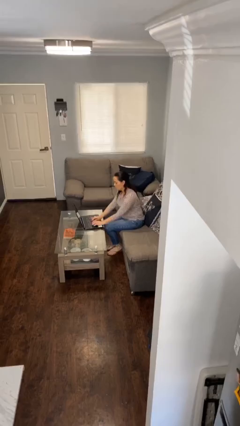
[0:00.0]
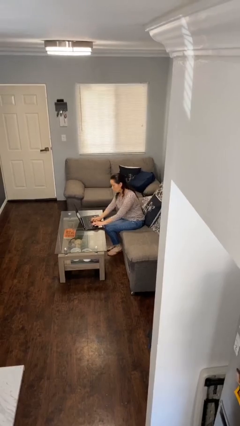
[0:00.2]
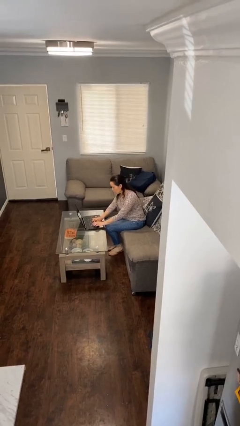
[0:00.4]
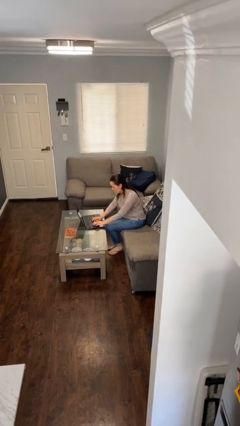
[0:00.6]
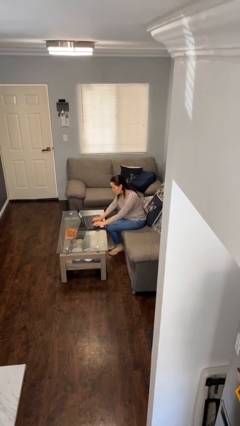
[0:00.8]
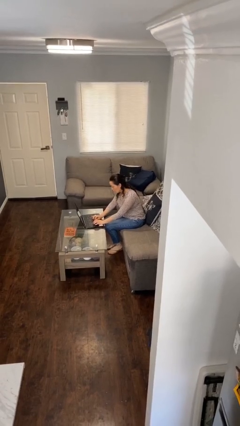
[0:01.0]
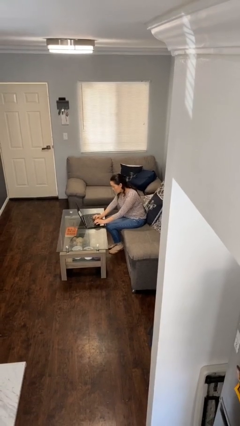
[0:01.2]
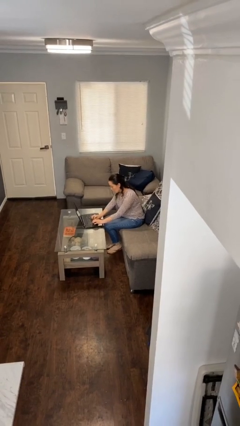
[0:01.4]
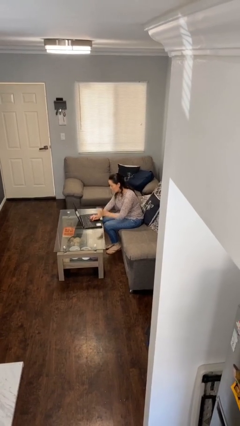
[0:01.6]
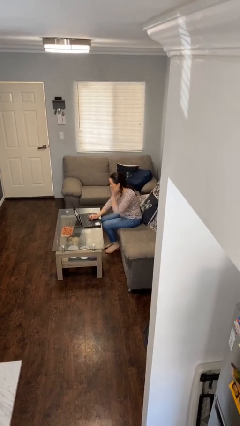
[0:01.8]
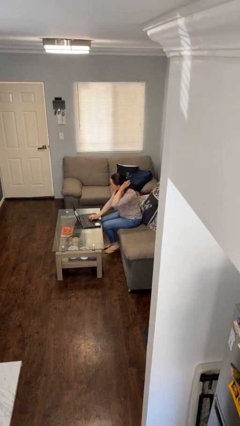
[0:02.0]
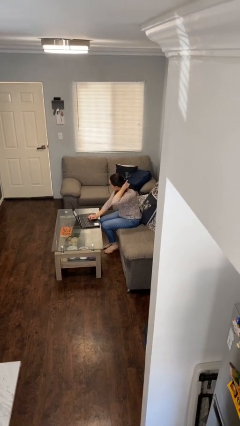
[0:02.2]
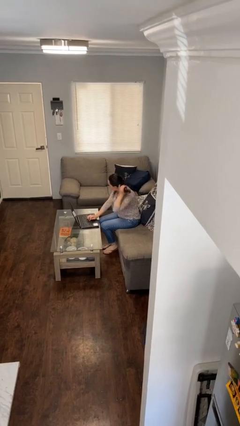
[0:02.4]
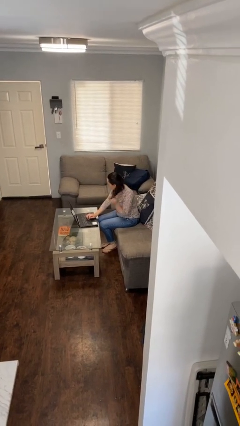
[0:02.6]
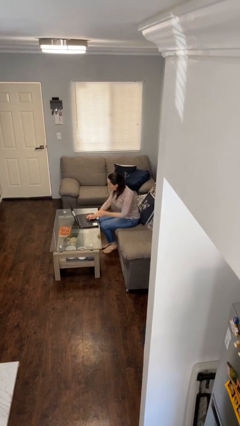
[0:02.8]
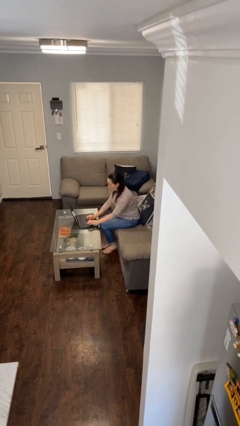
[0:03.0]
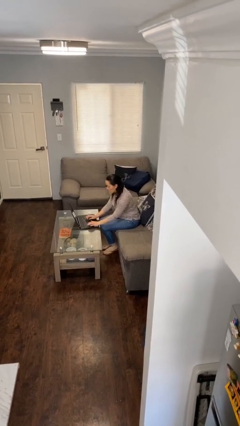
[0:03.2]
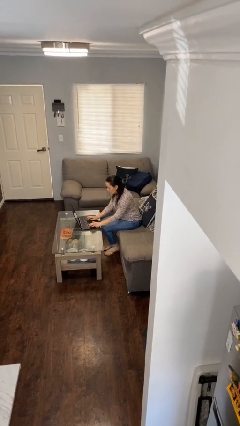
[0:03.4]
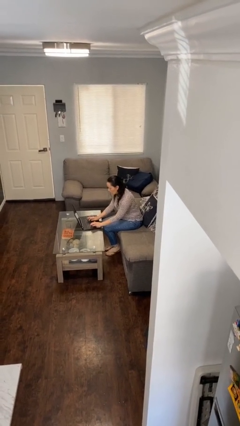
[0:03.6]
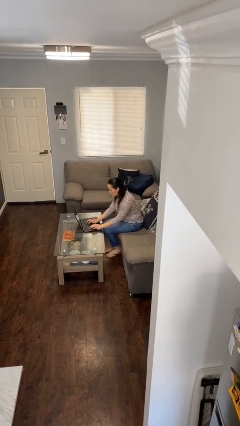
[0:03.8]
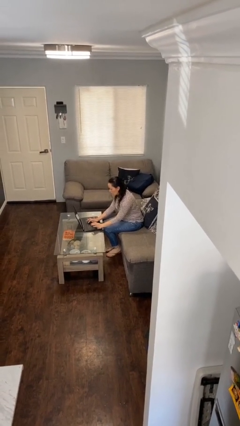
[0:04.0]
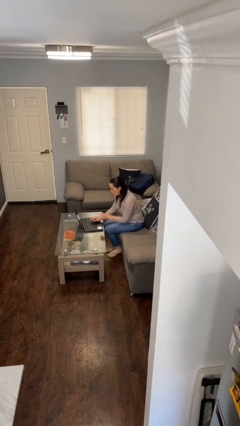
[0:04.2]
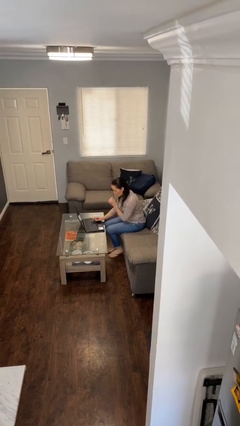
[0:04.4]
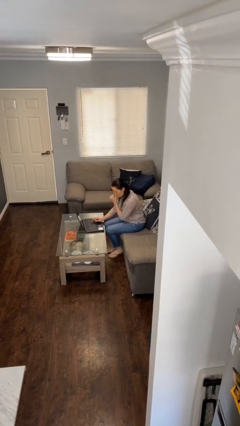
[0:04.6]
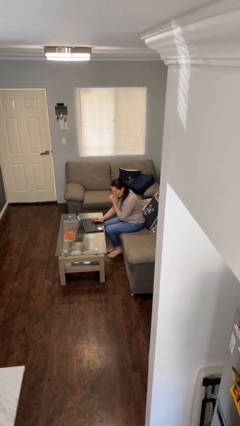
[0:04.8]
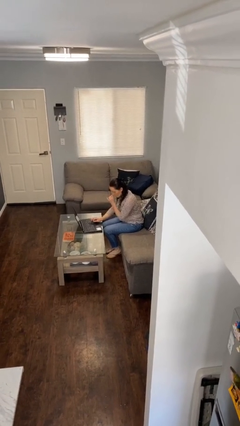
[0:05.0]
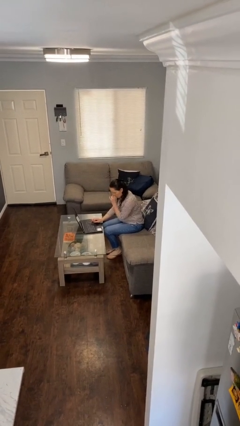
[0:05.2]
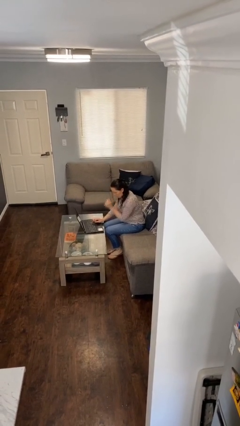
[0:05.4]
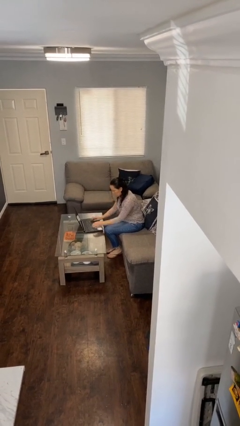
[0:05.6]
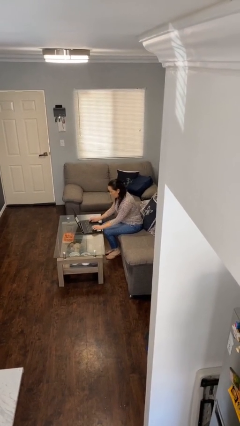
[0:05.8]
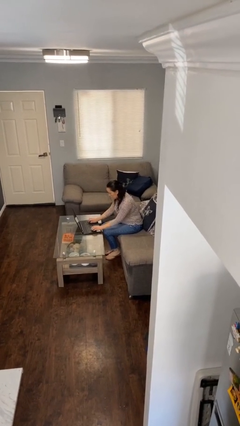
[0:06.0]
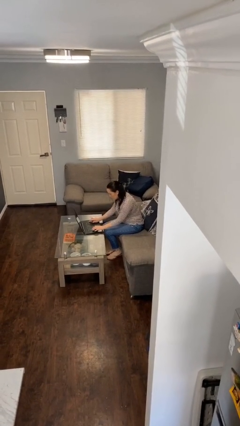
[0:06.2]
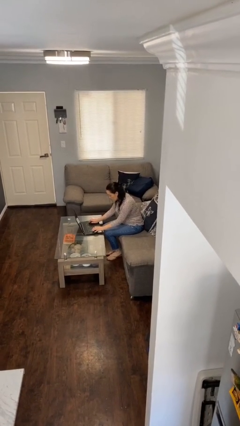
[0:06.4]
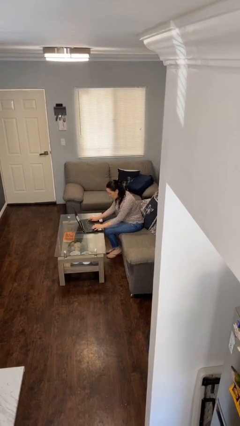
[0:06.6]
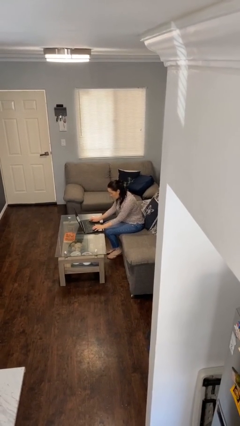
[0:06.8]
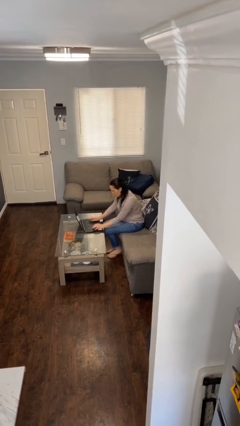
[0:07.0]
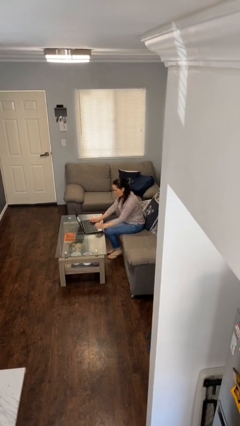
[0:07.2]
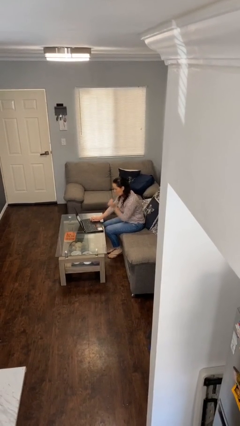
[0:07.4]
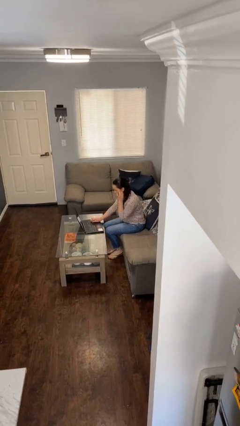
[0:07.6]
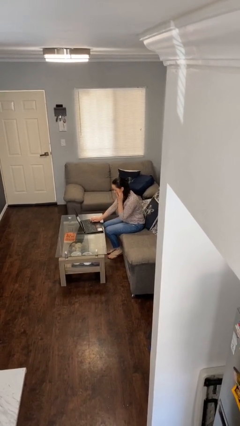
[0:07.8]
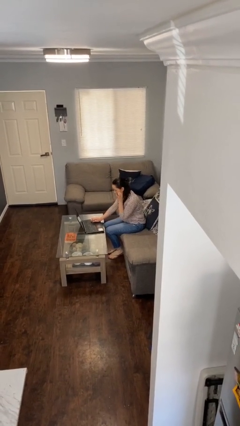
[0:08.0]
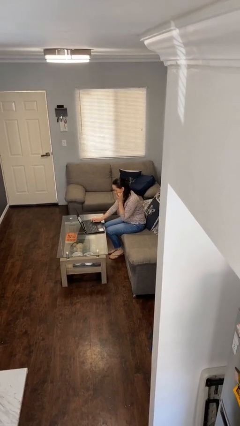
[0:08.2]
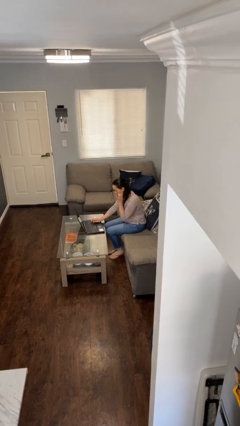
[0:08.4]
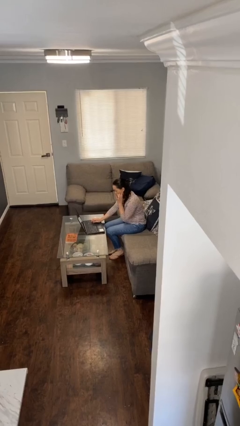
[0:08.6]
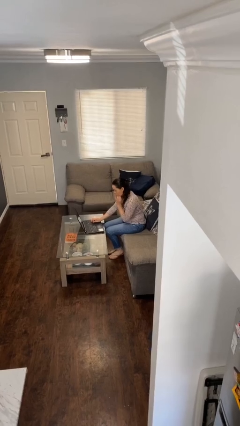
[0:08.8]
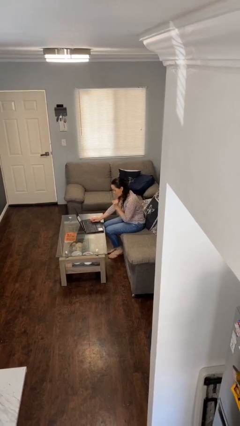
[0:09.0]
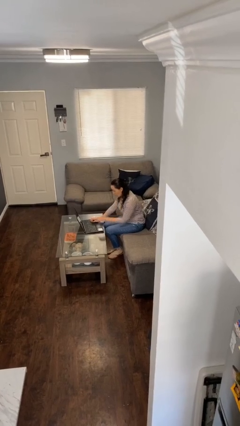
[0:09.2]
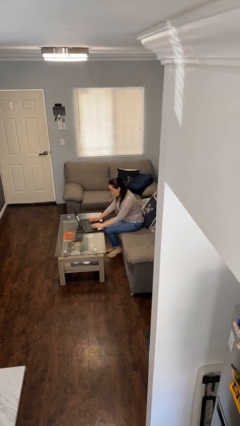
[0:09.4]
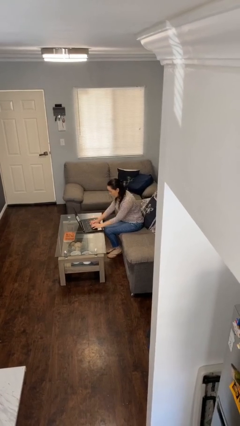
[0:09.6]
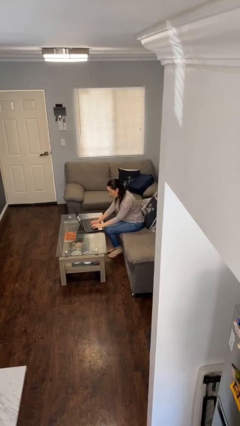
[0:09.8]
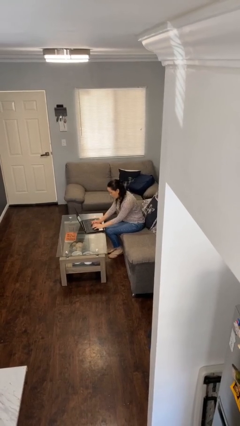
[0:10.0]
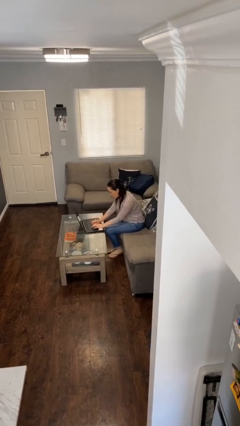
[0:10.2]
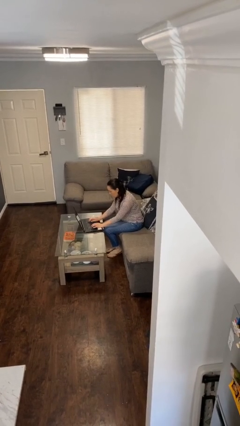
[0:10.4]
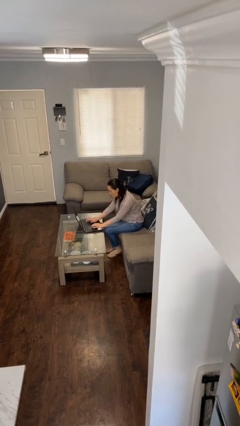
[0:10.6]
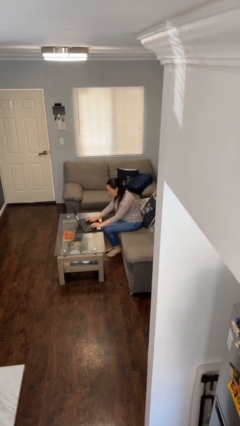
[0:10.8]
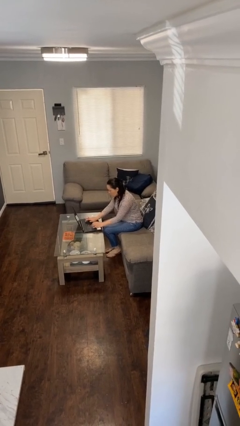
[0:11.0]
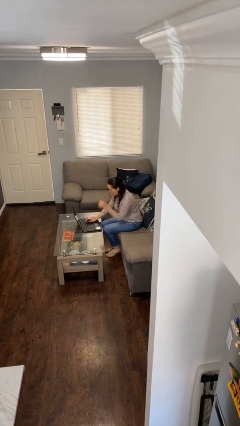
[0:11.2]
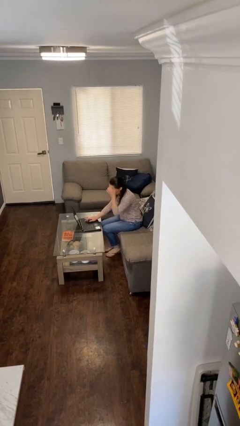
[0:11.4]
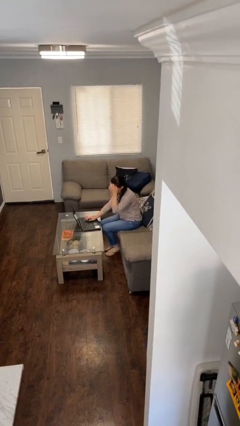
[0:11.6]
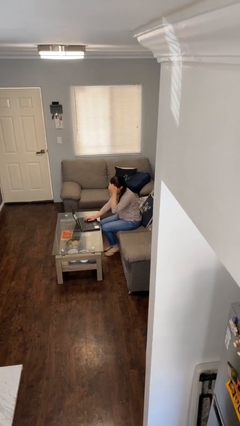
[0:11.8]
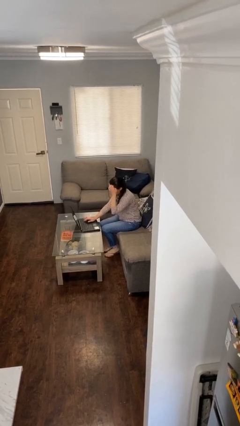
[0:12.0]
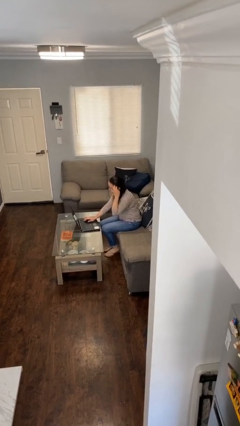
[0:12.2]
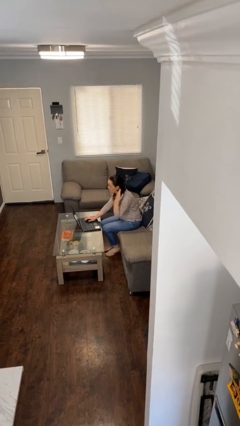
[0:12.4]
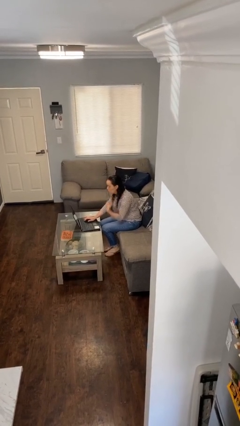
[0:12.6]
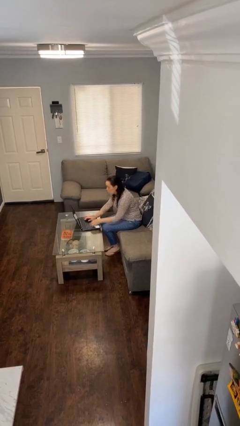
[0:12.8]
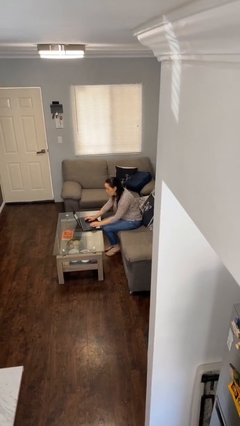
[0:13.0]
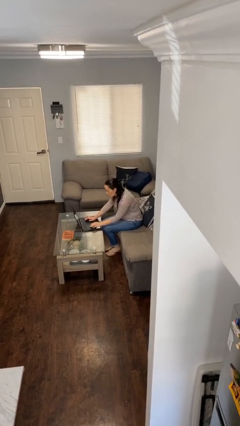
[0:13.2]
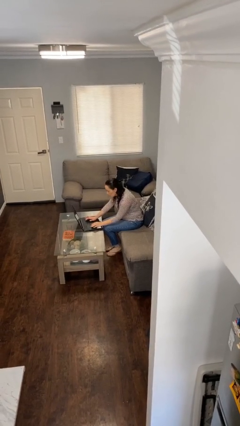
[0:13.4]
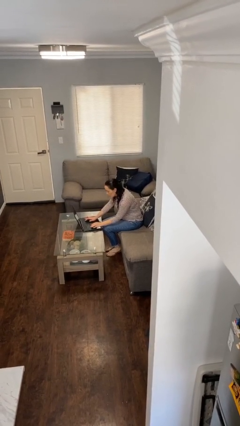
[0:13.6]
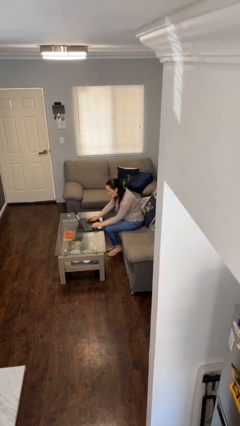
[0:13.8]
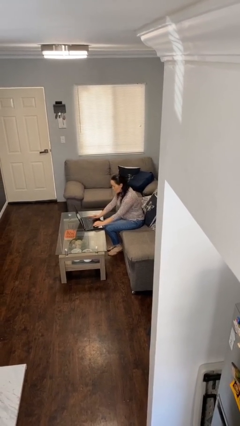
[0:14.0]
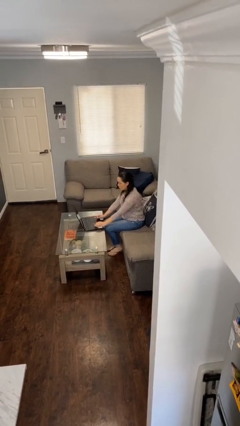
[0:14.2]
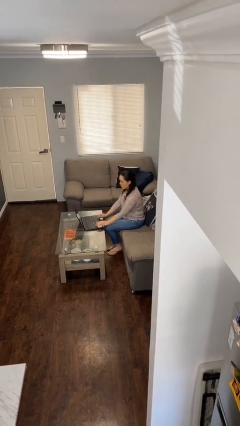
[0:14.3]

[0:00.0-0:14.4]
person interacts with laptop

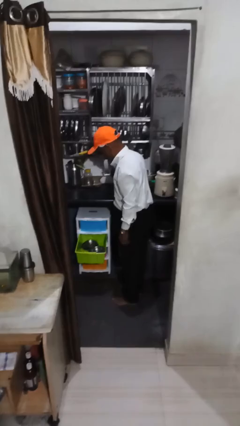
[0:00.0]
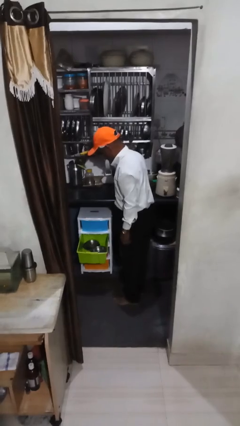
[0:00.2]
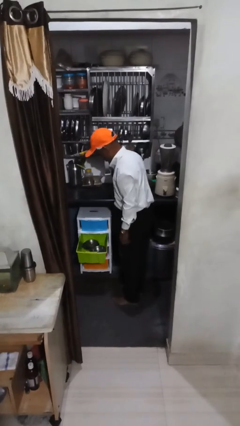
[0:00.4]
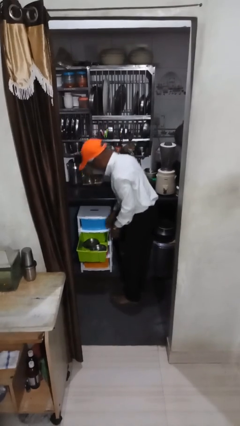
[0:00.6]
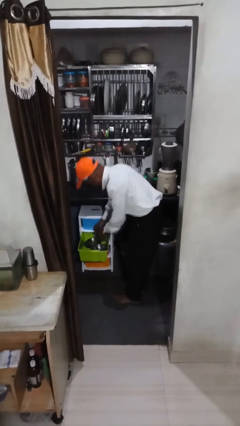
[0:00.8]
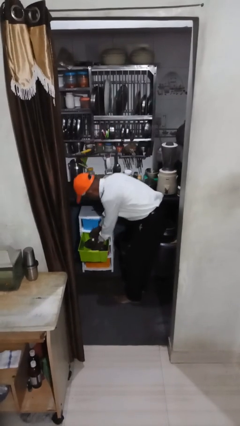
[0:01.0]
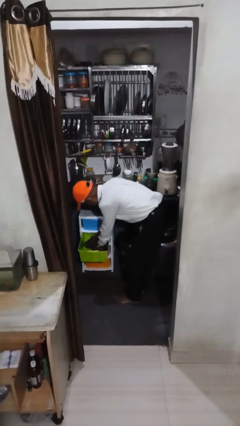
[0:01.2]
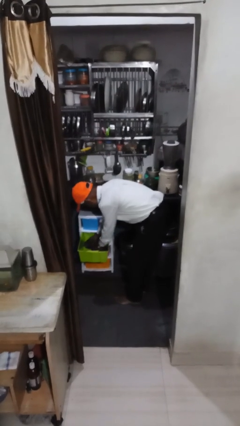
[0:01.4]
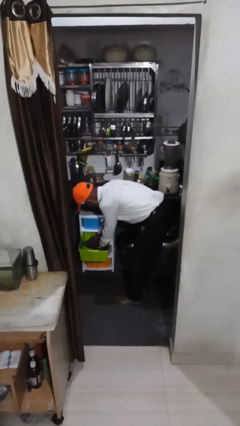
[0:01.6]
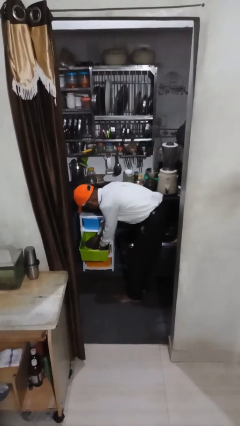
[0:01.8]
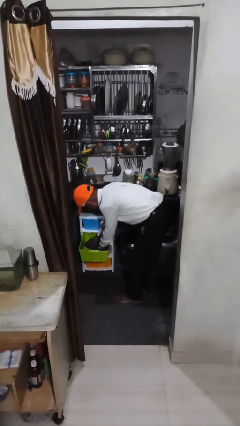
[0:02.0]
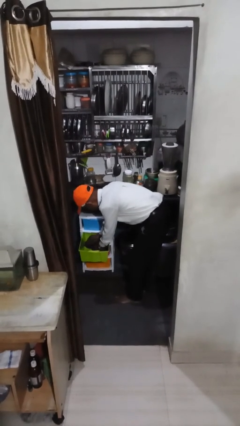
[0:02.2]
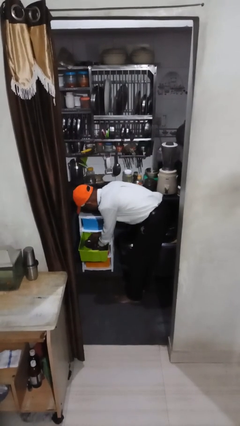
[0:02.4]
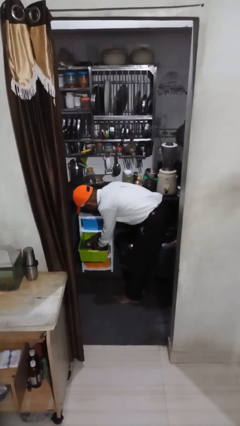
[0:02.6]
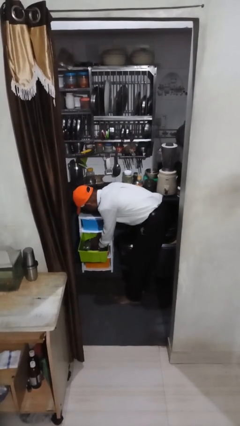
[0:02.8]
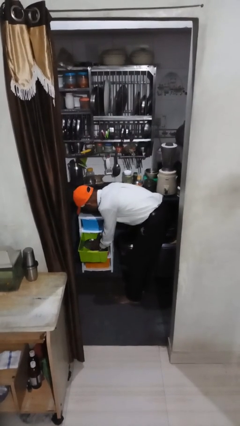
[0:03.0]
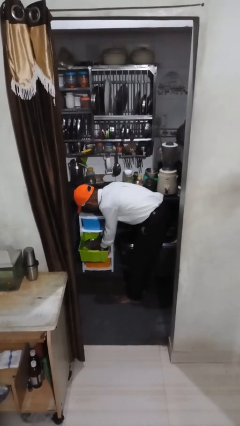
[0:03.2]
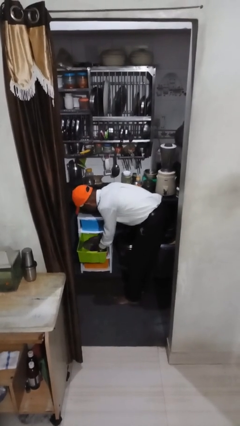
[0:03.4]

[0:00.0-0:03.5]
person searches in kitchen drawer

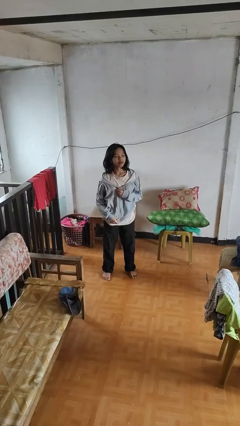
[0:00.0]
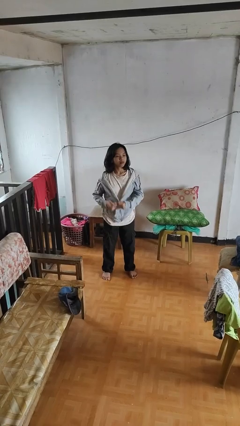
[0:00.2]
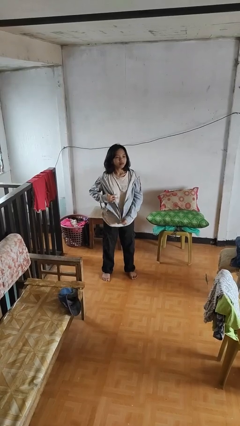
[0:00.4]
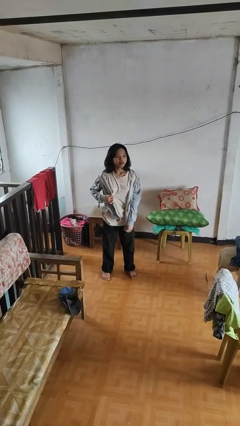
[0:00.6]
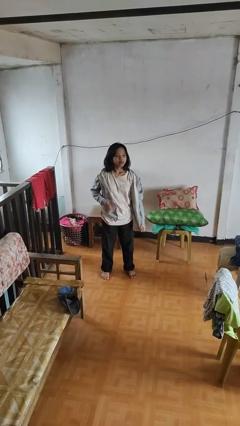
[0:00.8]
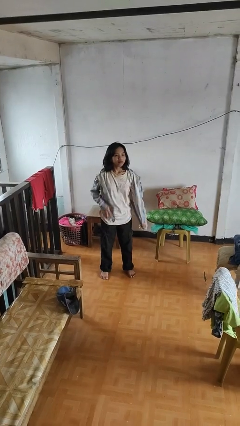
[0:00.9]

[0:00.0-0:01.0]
person unzips jacket
